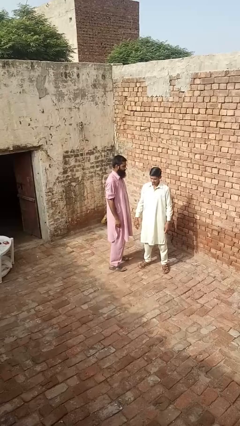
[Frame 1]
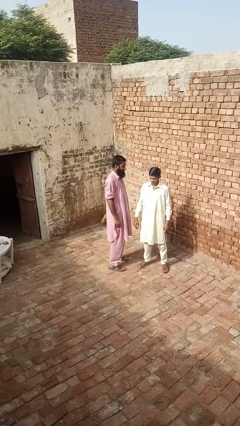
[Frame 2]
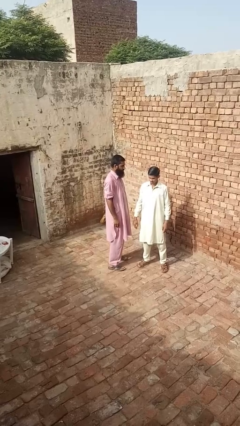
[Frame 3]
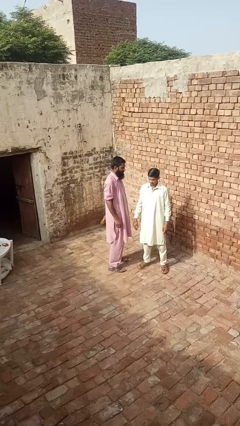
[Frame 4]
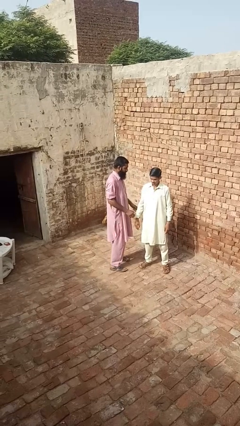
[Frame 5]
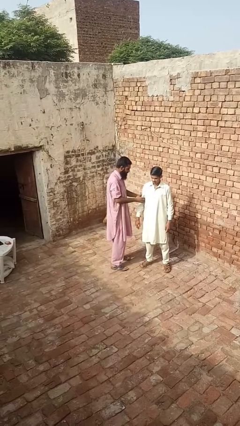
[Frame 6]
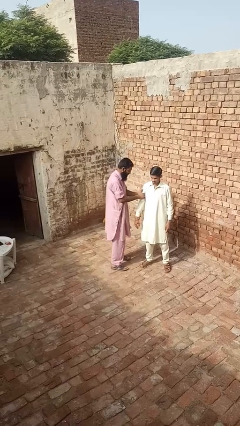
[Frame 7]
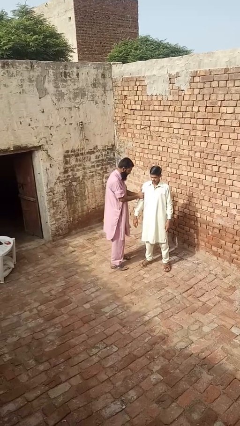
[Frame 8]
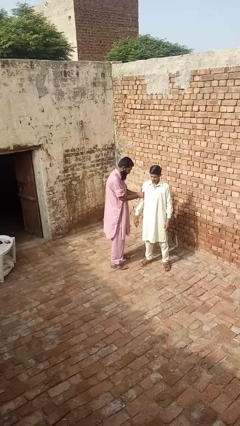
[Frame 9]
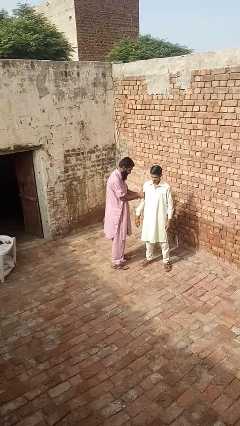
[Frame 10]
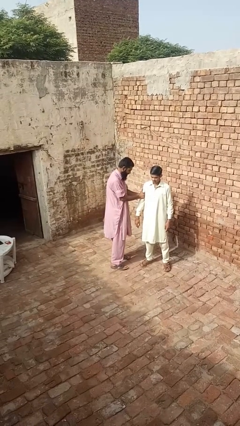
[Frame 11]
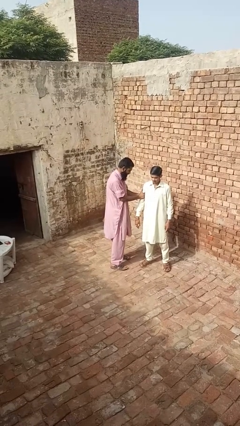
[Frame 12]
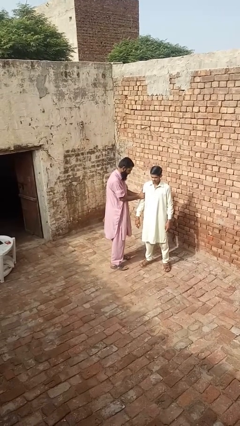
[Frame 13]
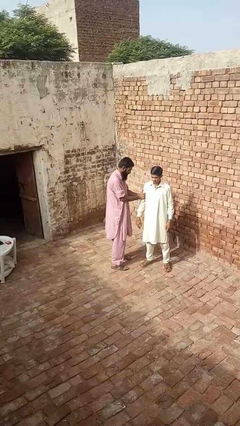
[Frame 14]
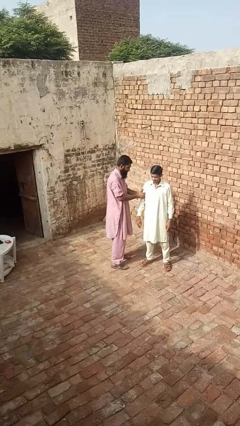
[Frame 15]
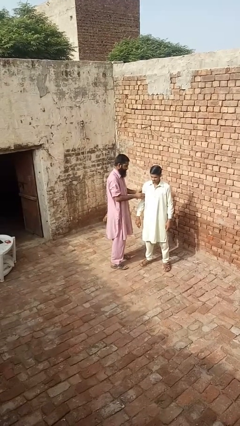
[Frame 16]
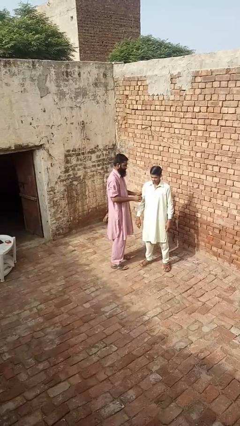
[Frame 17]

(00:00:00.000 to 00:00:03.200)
person grabs person by bicep

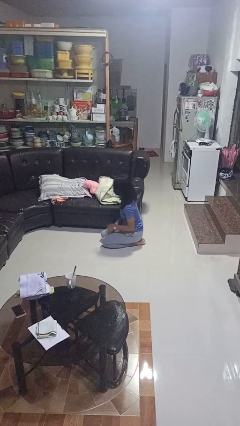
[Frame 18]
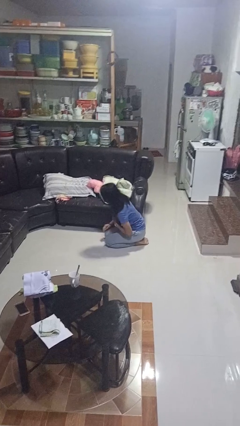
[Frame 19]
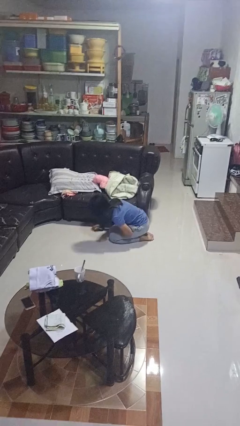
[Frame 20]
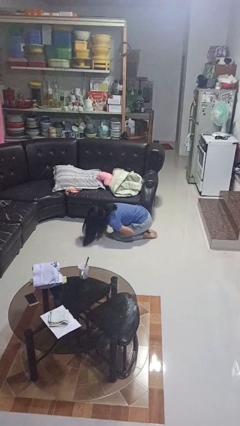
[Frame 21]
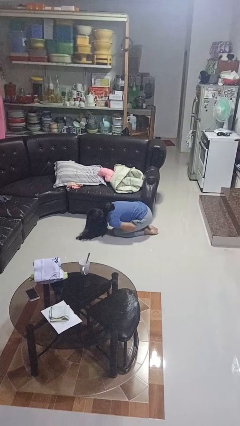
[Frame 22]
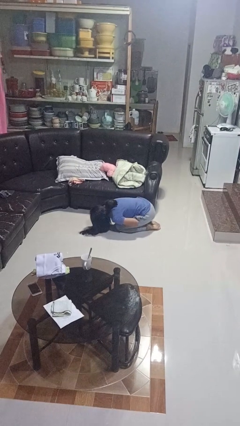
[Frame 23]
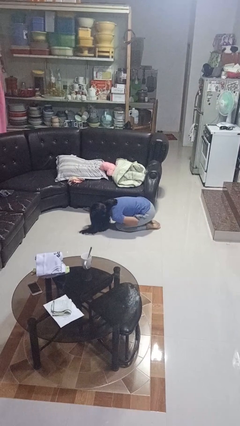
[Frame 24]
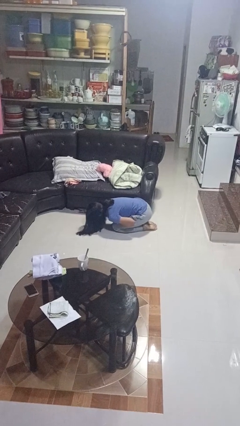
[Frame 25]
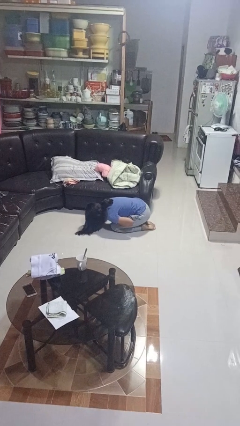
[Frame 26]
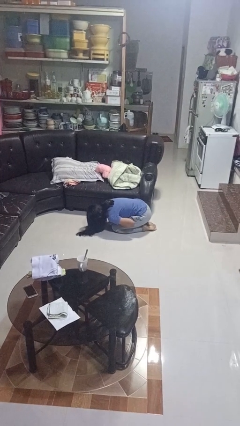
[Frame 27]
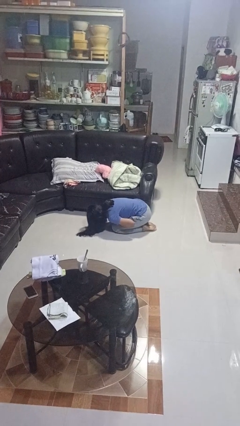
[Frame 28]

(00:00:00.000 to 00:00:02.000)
person searches under couch

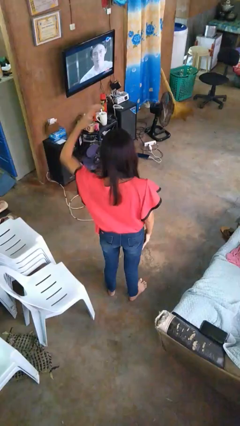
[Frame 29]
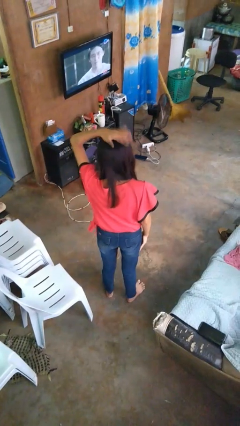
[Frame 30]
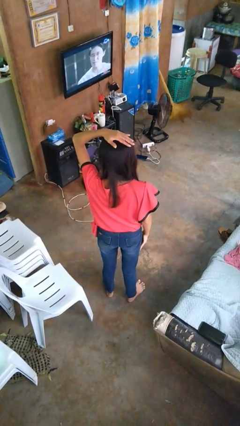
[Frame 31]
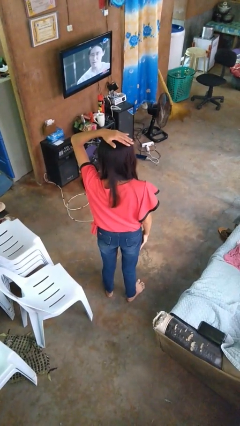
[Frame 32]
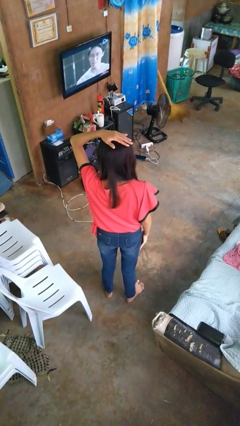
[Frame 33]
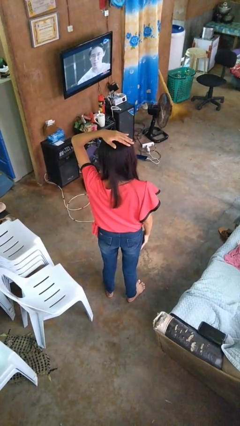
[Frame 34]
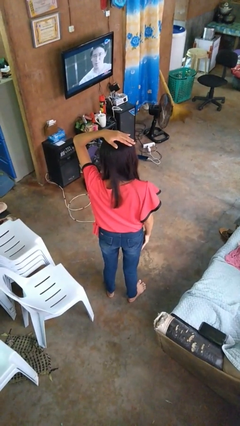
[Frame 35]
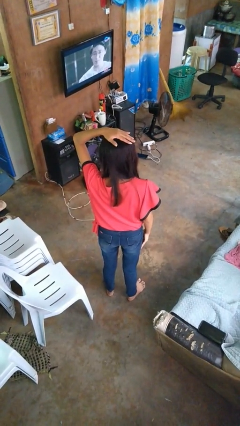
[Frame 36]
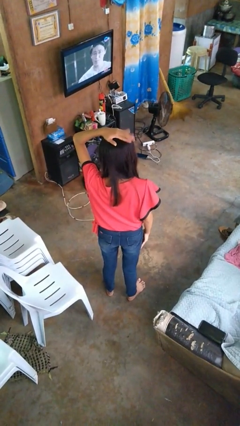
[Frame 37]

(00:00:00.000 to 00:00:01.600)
person pats head

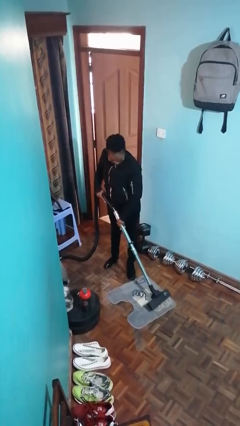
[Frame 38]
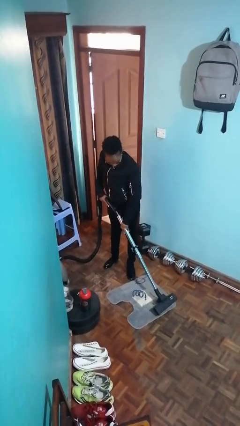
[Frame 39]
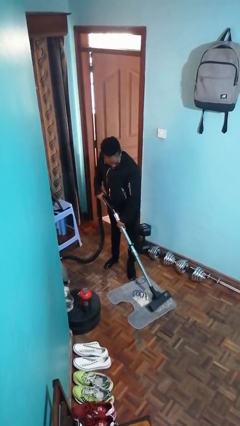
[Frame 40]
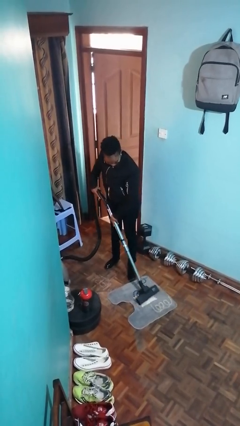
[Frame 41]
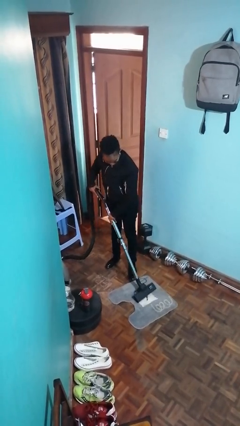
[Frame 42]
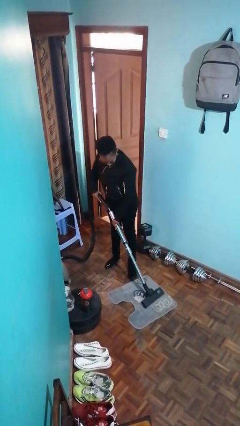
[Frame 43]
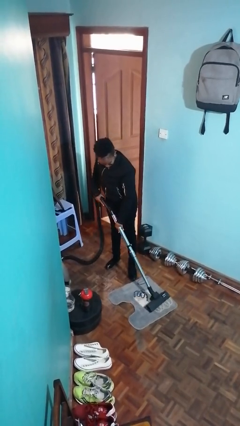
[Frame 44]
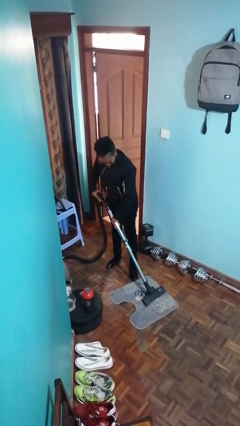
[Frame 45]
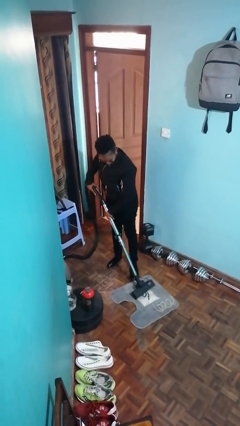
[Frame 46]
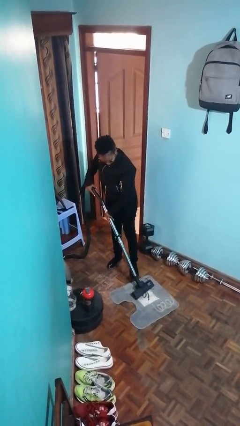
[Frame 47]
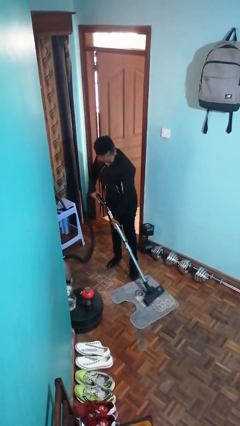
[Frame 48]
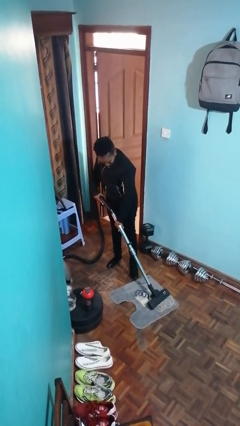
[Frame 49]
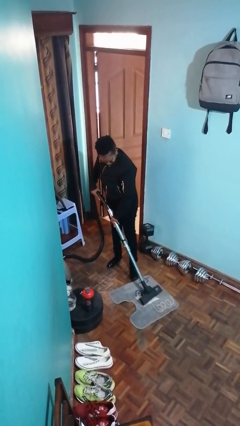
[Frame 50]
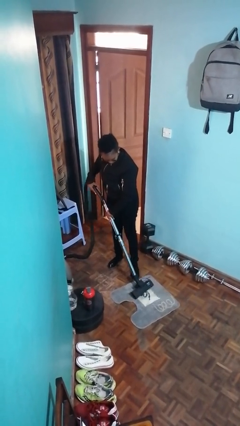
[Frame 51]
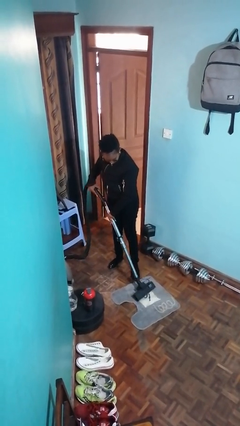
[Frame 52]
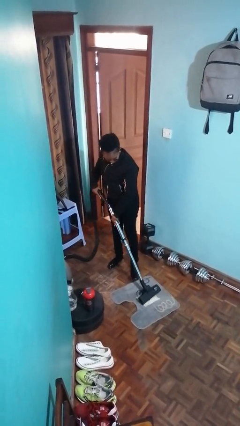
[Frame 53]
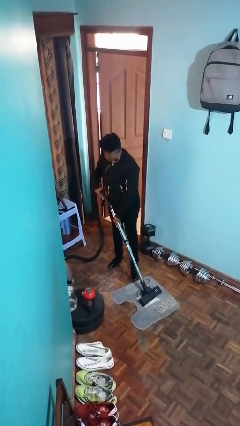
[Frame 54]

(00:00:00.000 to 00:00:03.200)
person vacuums carpet

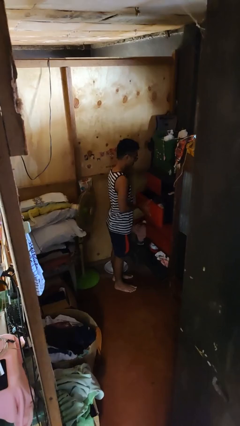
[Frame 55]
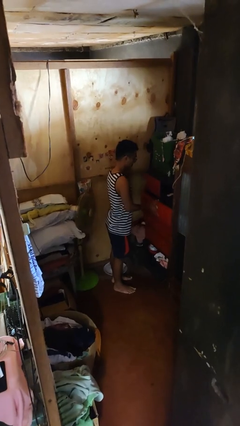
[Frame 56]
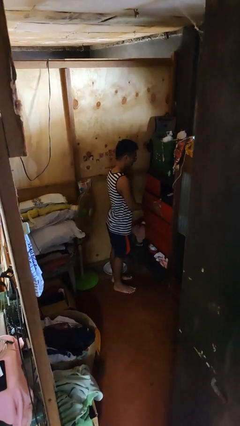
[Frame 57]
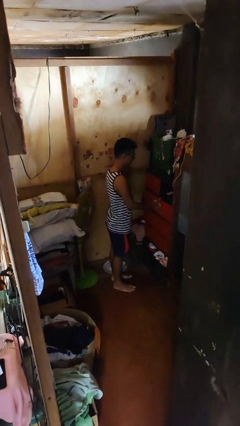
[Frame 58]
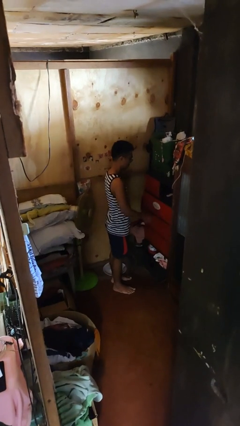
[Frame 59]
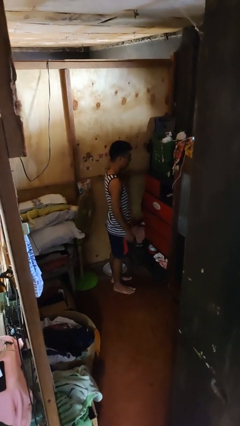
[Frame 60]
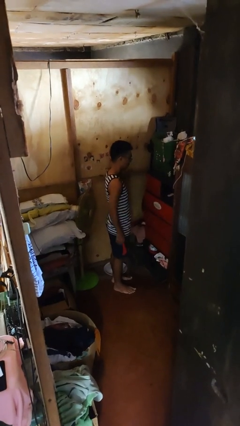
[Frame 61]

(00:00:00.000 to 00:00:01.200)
person closes dresser drawer

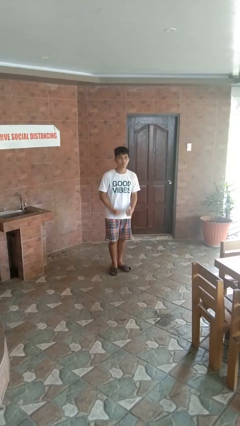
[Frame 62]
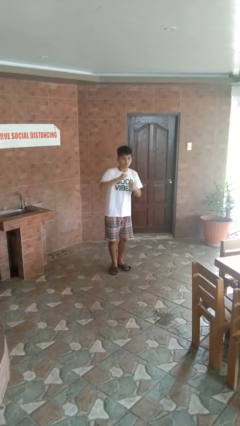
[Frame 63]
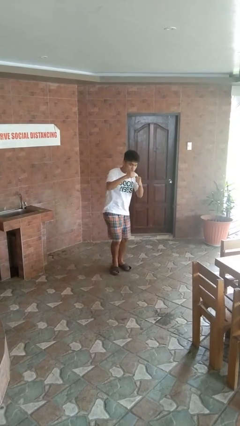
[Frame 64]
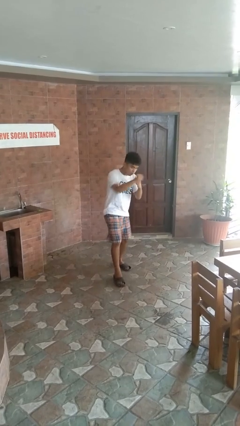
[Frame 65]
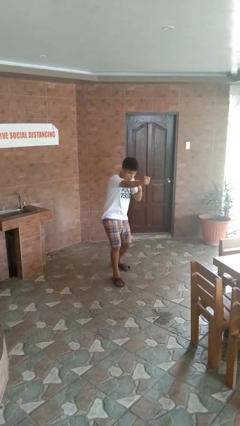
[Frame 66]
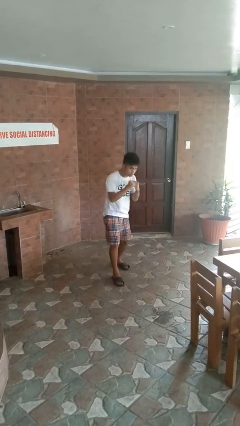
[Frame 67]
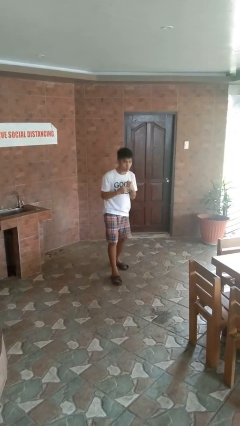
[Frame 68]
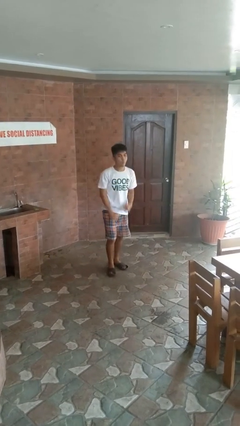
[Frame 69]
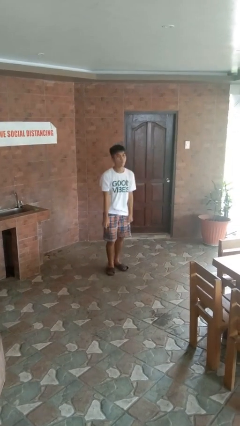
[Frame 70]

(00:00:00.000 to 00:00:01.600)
person punches

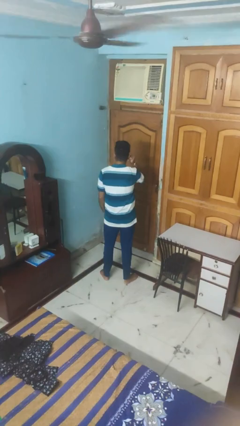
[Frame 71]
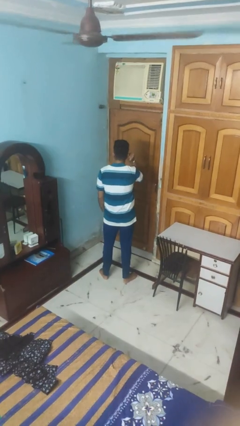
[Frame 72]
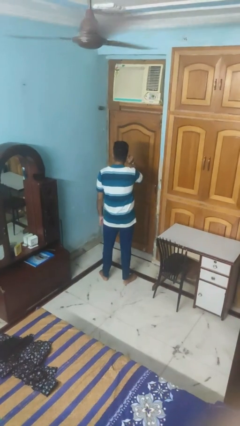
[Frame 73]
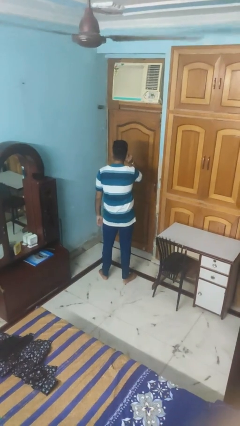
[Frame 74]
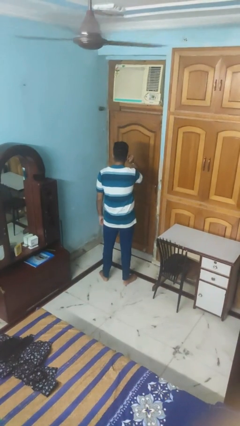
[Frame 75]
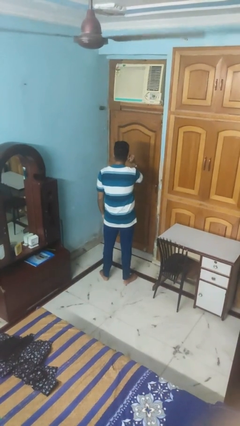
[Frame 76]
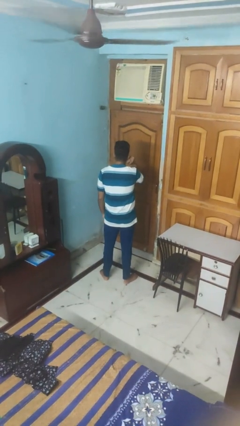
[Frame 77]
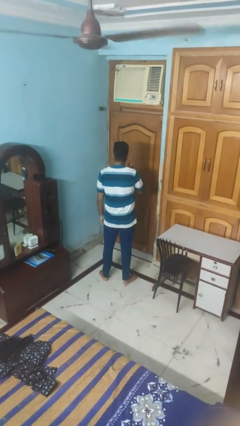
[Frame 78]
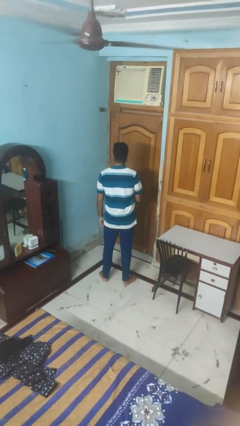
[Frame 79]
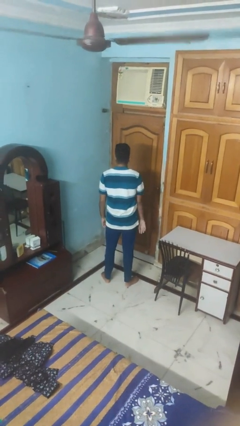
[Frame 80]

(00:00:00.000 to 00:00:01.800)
person touches earlobe

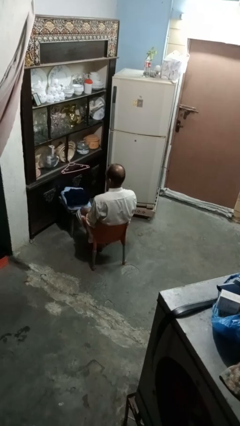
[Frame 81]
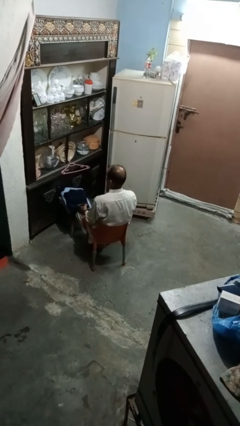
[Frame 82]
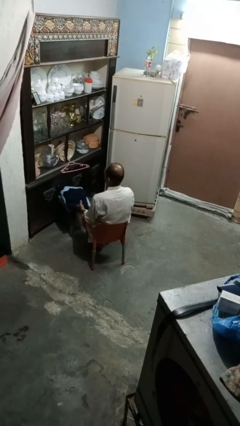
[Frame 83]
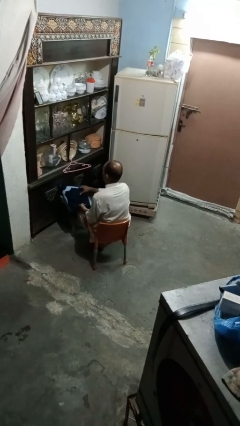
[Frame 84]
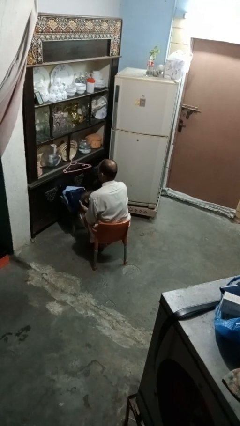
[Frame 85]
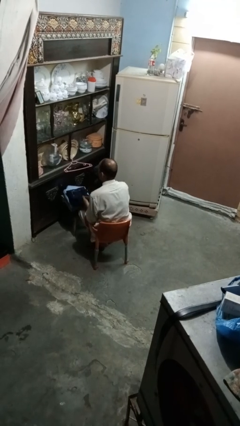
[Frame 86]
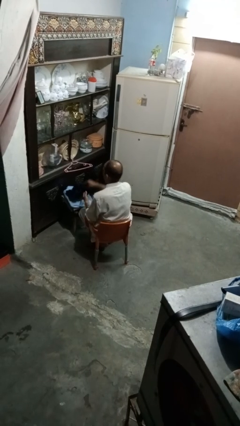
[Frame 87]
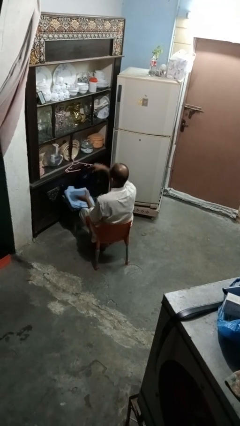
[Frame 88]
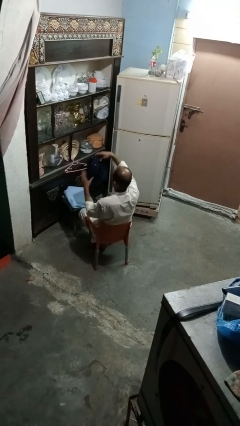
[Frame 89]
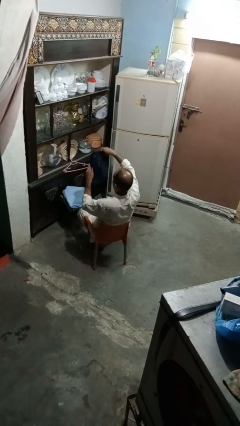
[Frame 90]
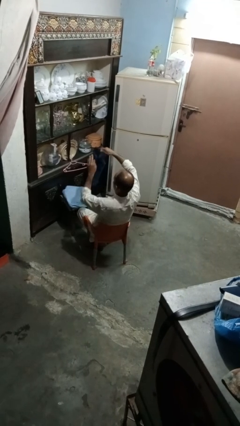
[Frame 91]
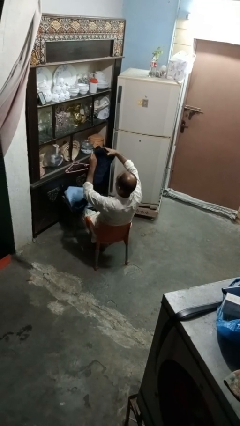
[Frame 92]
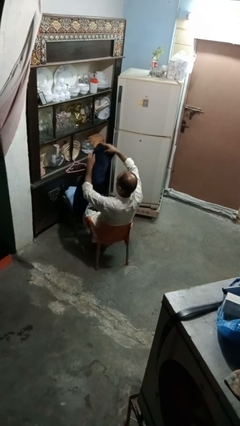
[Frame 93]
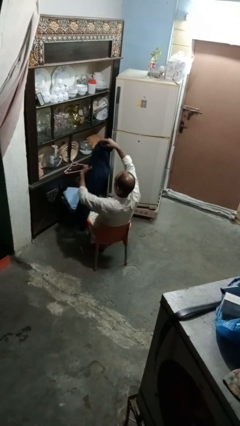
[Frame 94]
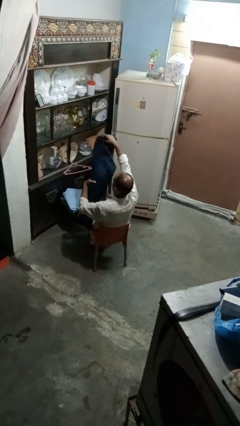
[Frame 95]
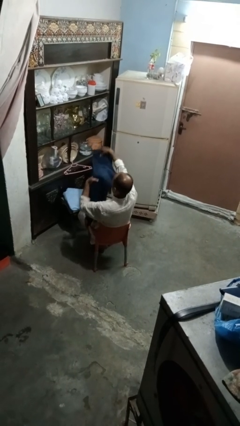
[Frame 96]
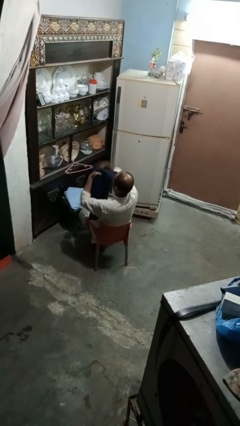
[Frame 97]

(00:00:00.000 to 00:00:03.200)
person folds pants
